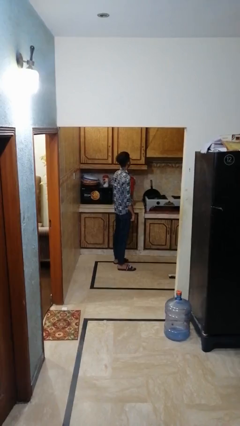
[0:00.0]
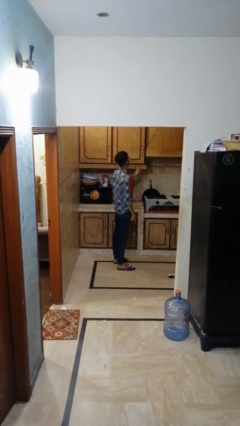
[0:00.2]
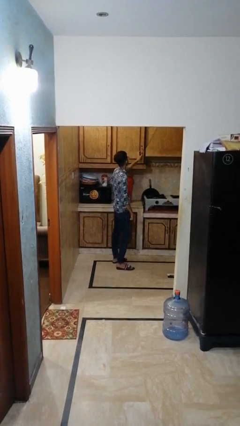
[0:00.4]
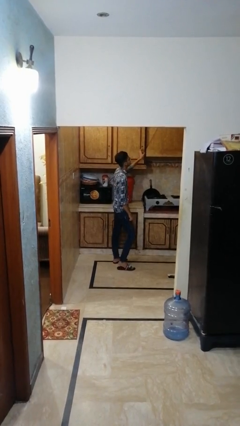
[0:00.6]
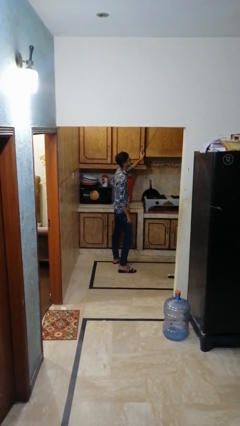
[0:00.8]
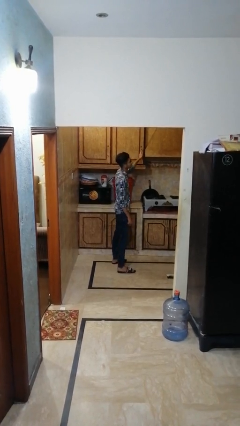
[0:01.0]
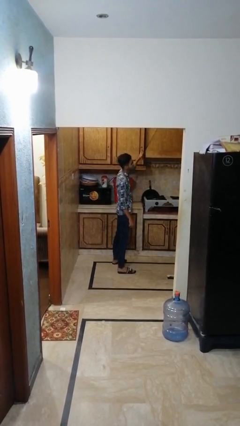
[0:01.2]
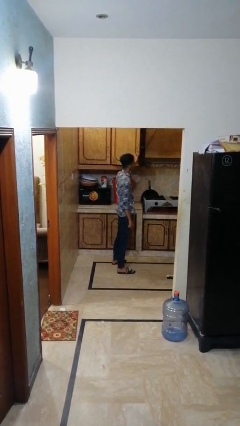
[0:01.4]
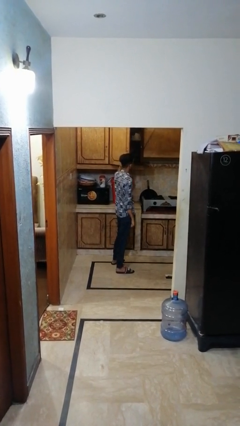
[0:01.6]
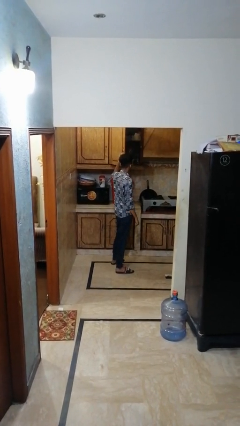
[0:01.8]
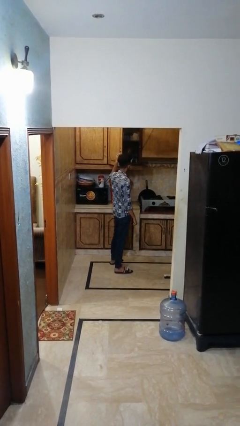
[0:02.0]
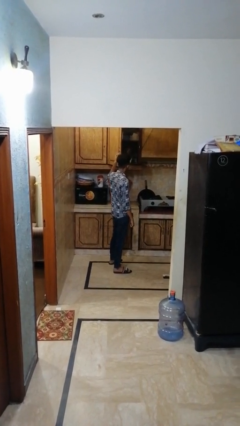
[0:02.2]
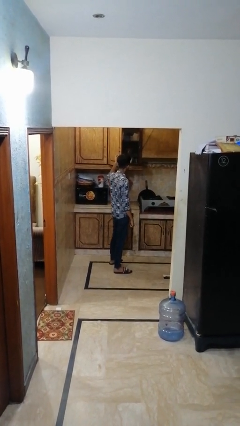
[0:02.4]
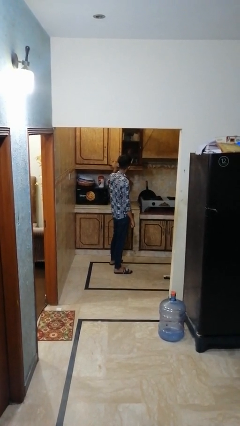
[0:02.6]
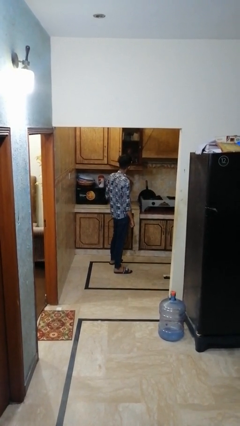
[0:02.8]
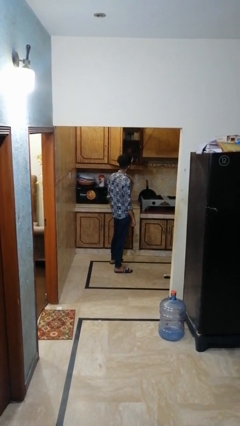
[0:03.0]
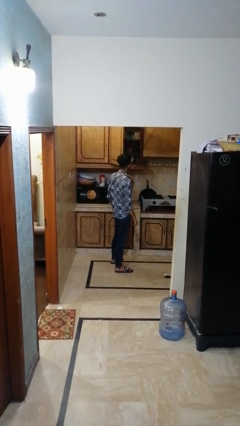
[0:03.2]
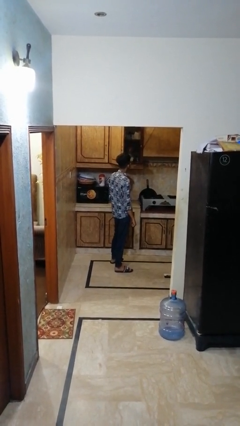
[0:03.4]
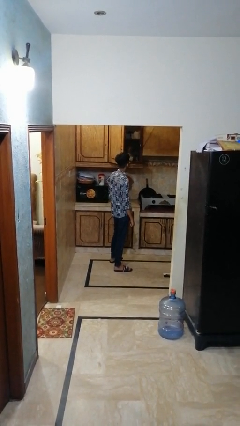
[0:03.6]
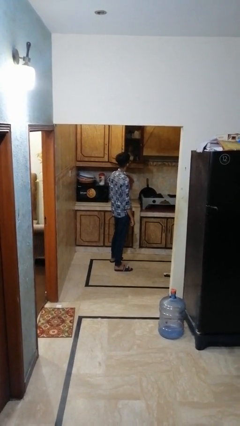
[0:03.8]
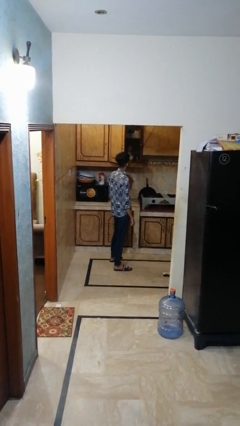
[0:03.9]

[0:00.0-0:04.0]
person opens cabinet

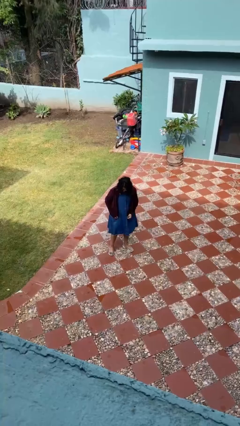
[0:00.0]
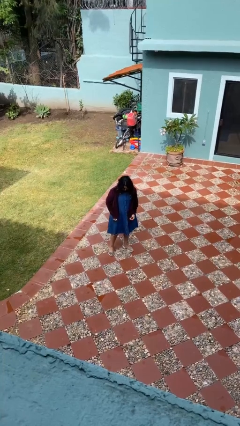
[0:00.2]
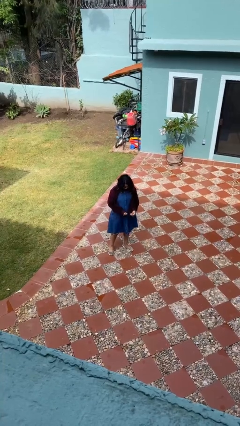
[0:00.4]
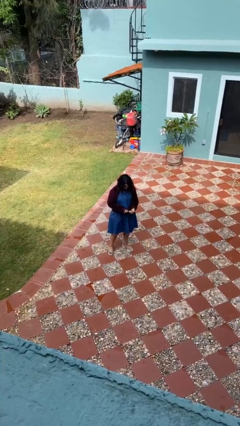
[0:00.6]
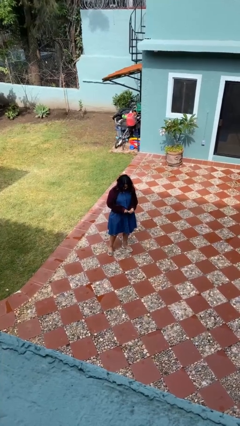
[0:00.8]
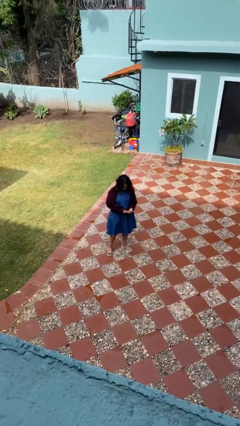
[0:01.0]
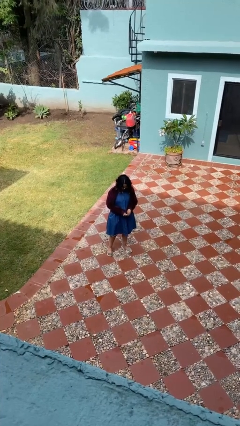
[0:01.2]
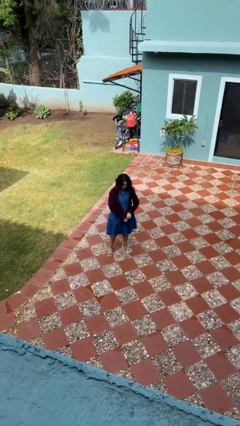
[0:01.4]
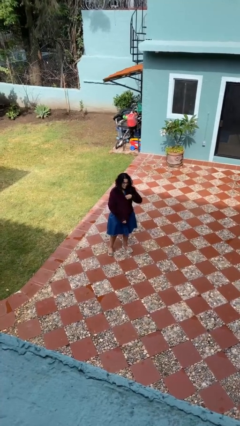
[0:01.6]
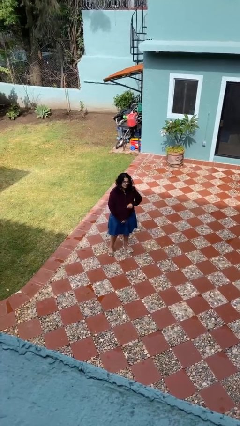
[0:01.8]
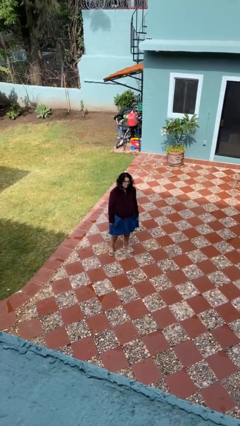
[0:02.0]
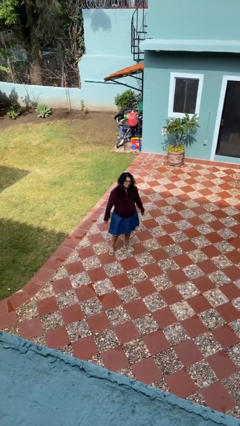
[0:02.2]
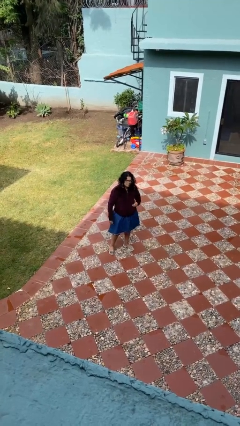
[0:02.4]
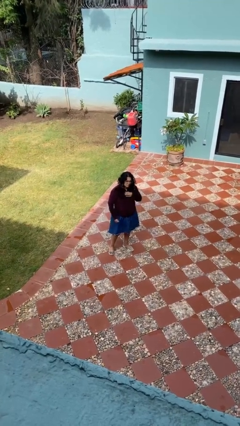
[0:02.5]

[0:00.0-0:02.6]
person zips up jacket

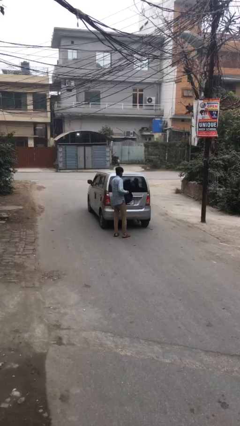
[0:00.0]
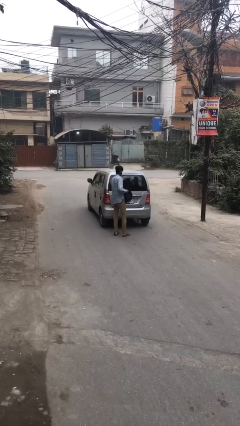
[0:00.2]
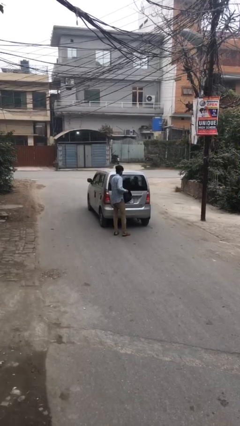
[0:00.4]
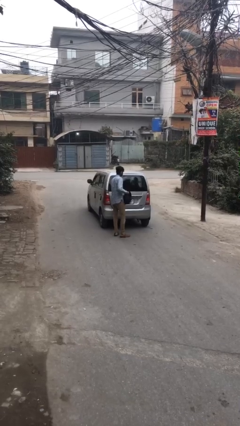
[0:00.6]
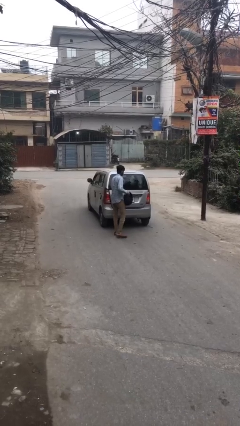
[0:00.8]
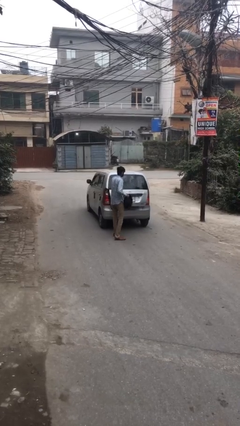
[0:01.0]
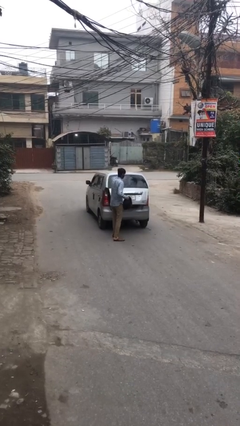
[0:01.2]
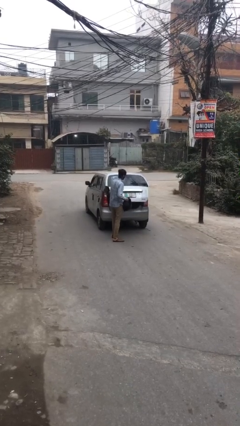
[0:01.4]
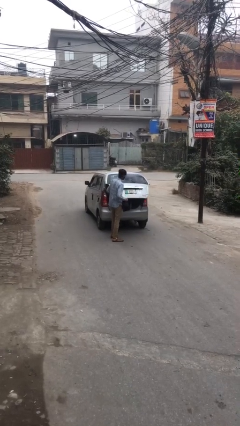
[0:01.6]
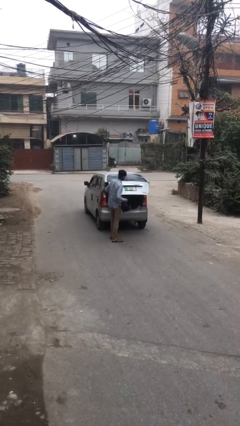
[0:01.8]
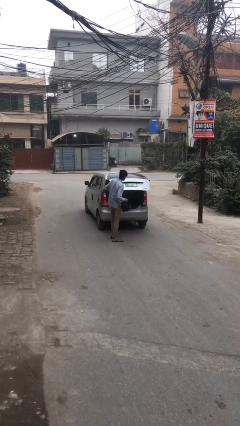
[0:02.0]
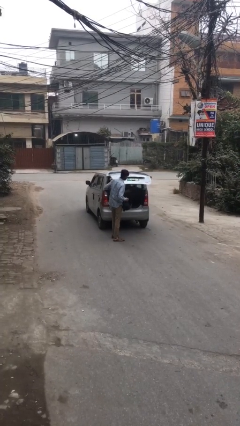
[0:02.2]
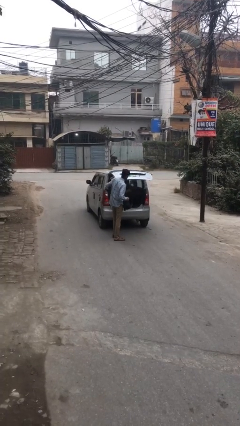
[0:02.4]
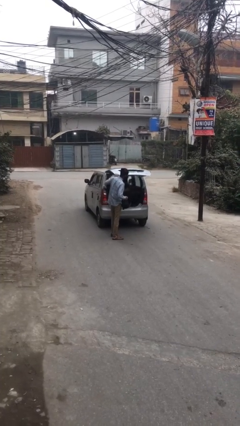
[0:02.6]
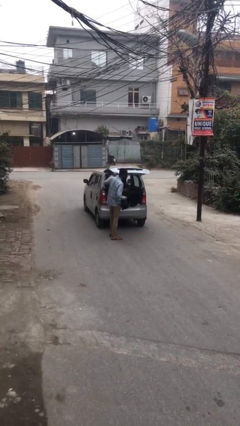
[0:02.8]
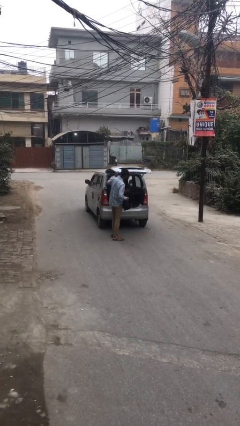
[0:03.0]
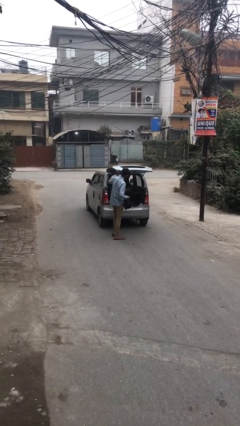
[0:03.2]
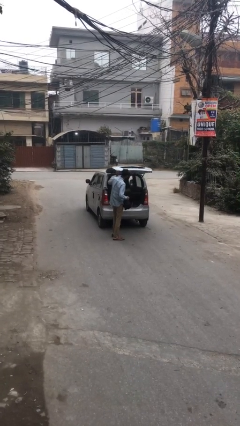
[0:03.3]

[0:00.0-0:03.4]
person opens car trunk

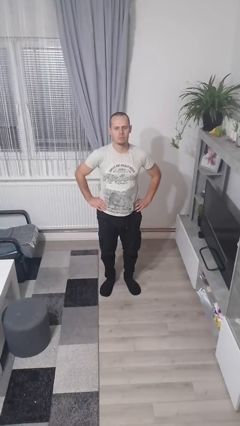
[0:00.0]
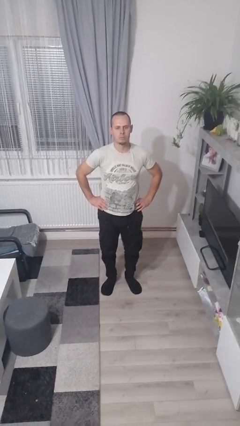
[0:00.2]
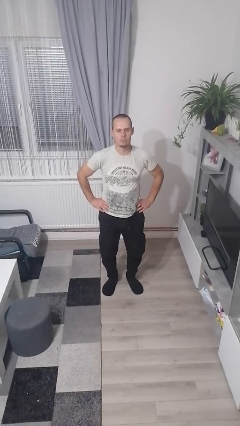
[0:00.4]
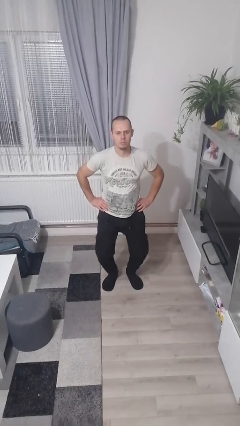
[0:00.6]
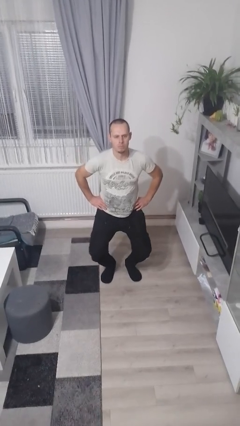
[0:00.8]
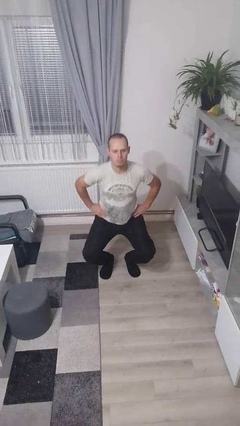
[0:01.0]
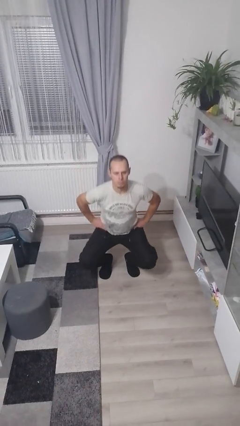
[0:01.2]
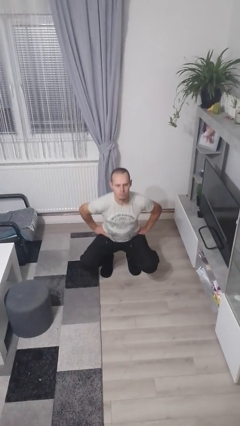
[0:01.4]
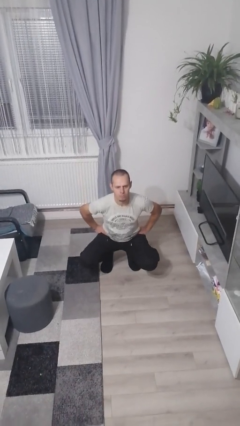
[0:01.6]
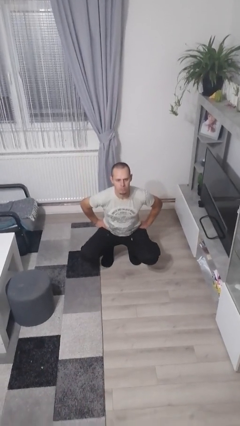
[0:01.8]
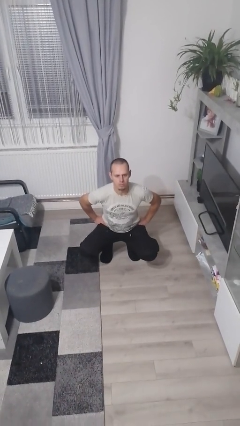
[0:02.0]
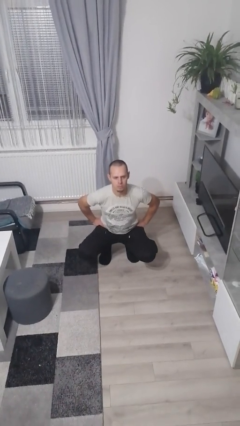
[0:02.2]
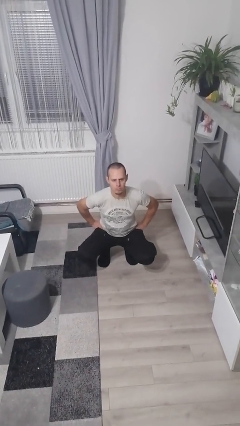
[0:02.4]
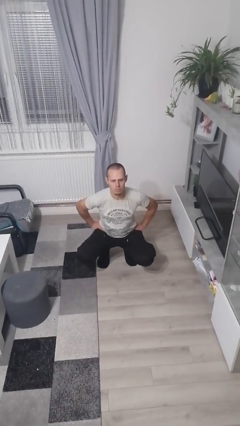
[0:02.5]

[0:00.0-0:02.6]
person squats

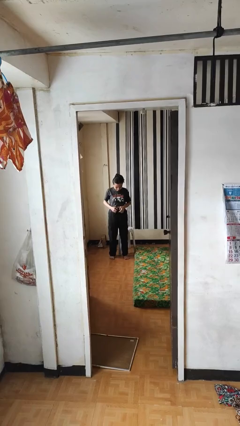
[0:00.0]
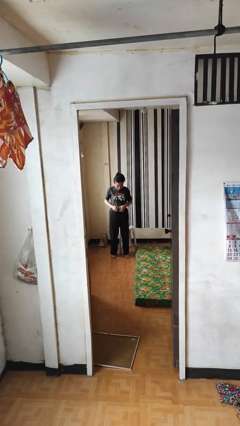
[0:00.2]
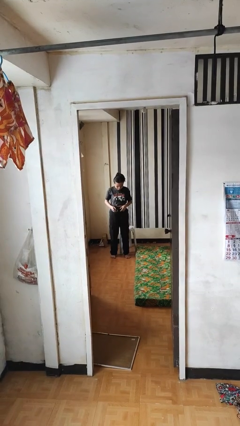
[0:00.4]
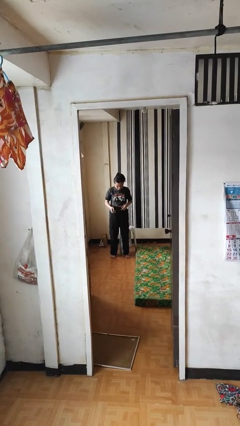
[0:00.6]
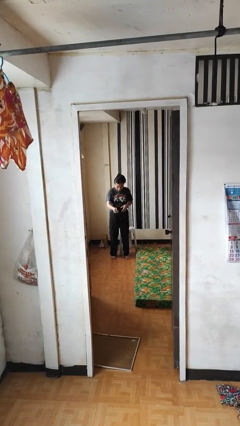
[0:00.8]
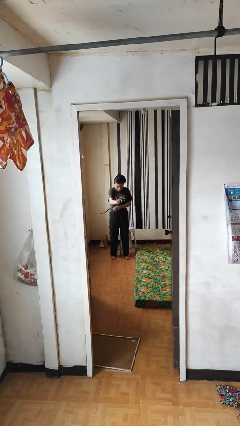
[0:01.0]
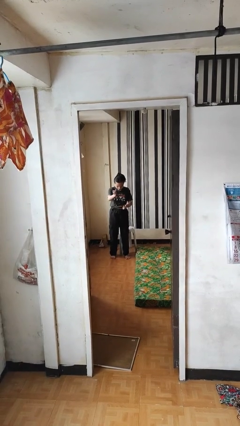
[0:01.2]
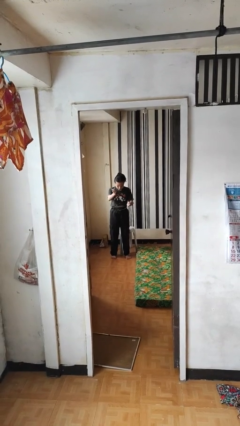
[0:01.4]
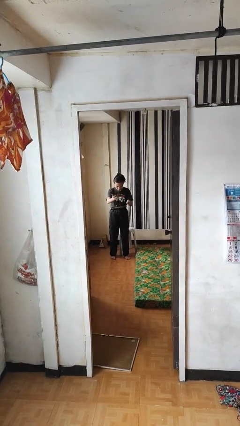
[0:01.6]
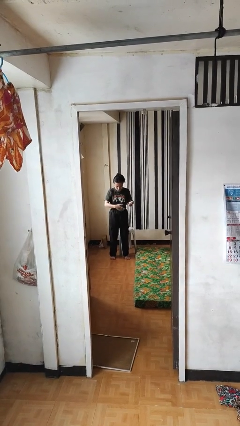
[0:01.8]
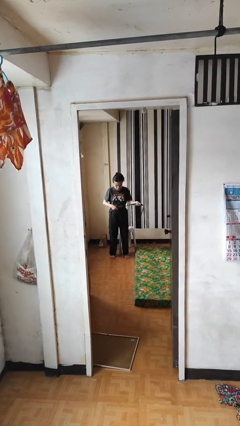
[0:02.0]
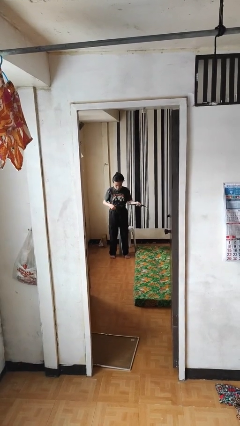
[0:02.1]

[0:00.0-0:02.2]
person takes off belt

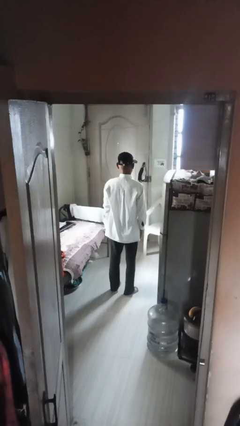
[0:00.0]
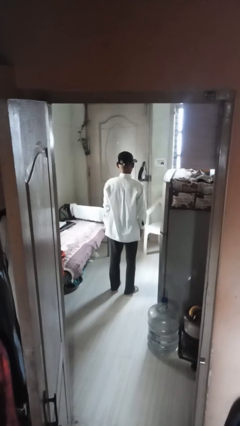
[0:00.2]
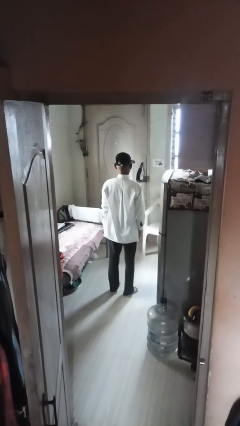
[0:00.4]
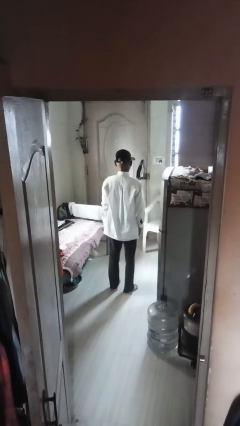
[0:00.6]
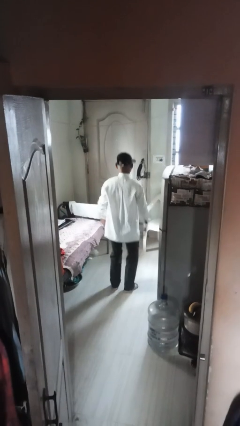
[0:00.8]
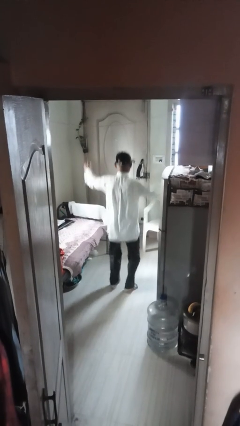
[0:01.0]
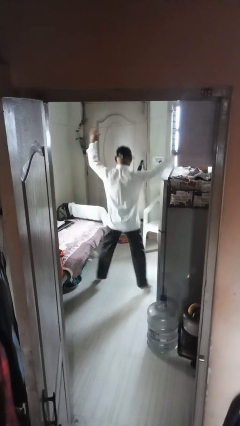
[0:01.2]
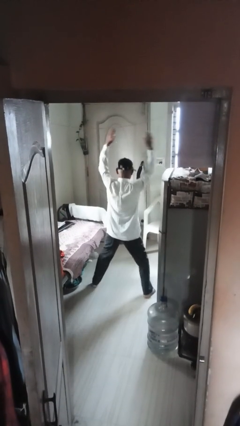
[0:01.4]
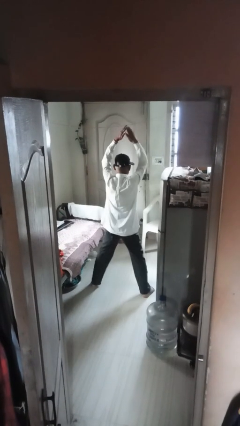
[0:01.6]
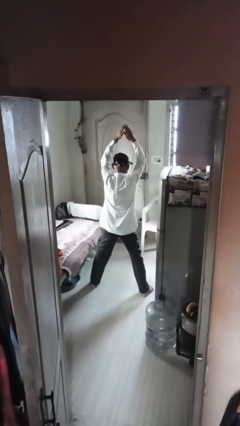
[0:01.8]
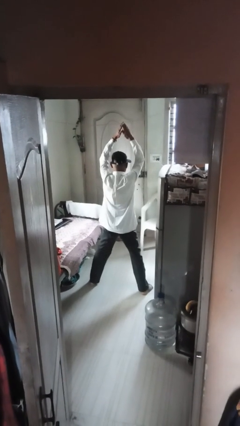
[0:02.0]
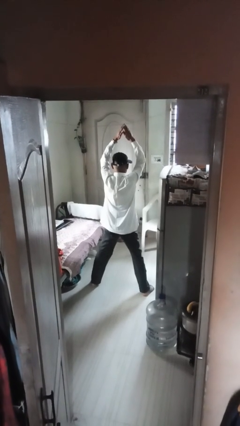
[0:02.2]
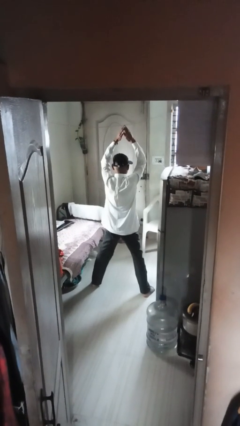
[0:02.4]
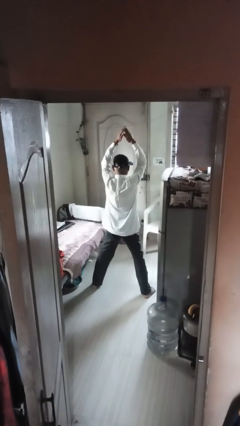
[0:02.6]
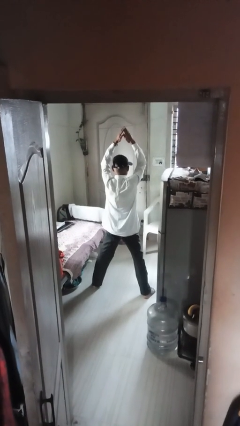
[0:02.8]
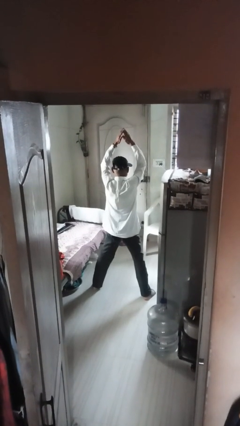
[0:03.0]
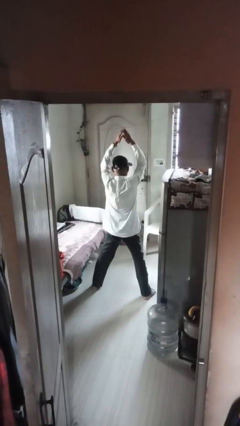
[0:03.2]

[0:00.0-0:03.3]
person exercises with jumping jacks
